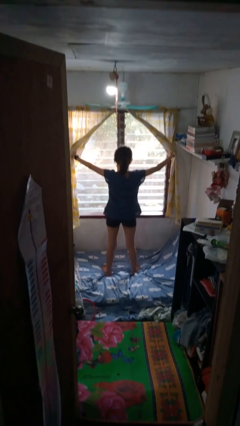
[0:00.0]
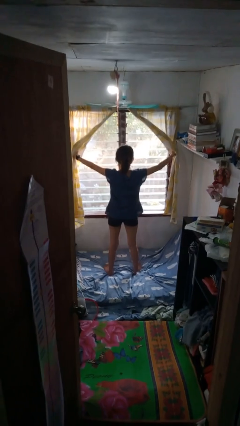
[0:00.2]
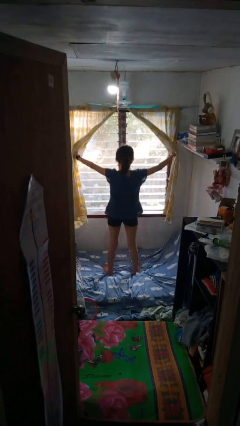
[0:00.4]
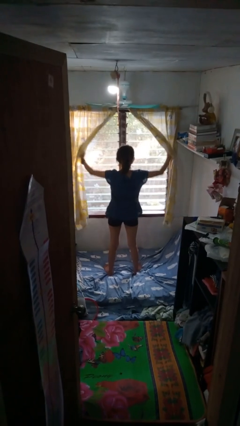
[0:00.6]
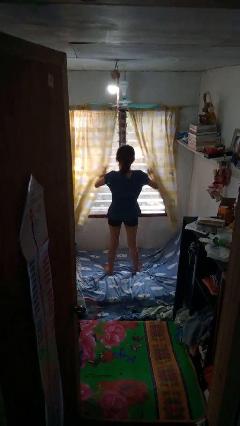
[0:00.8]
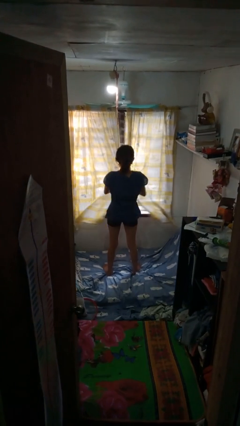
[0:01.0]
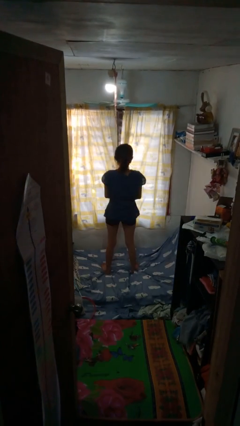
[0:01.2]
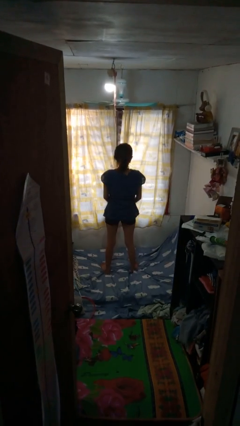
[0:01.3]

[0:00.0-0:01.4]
person closes curtains

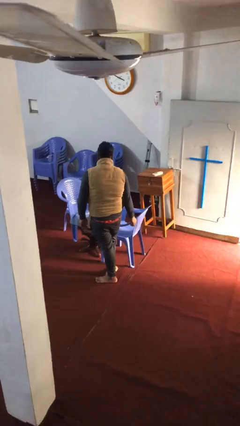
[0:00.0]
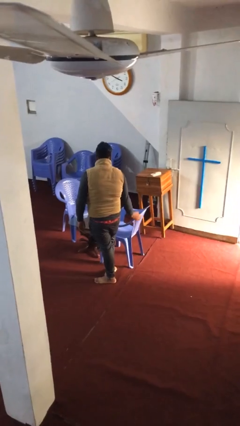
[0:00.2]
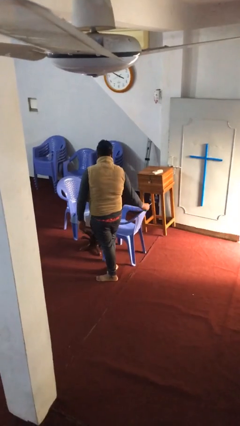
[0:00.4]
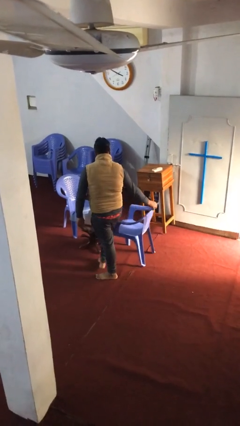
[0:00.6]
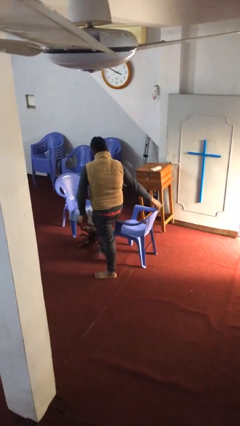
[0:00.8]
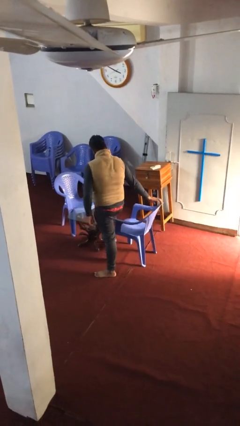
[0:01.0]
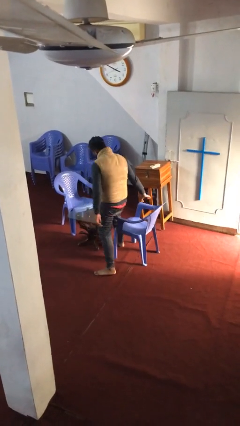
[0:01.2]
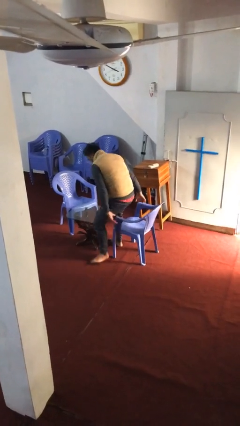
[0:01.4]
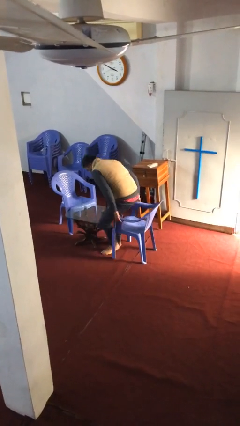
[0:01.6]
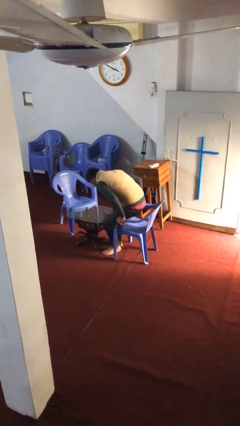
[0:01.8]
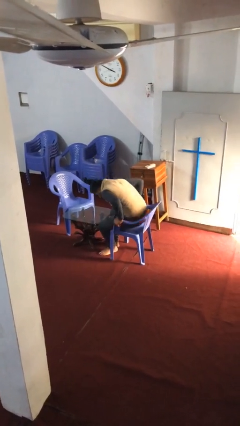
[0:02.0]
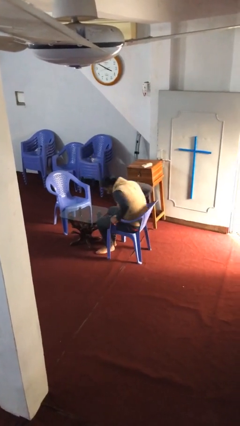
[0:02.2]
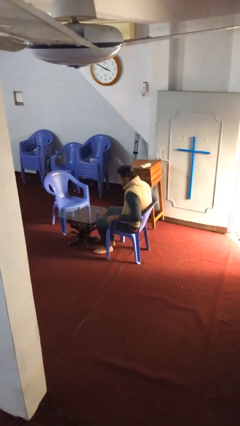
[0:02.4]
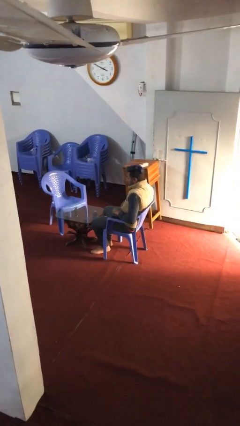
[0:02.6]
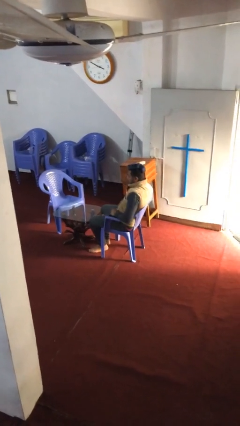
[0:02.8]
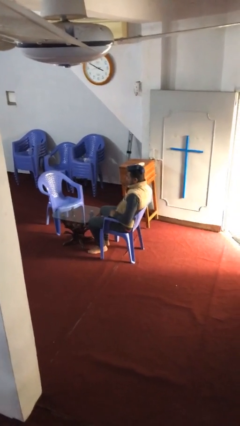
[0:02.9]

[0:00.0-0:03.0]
person sits down

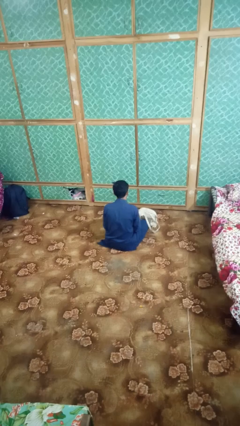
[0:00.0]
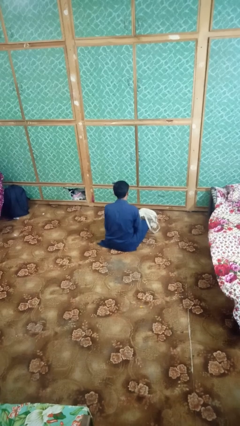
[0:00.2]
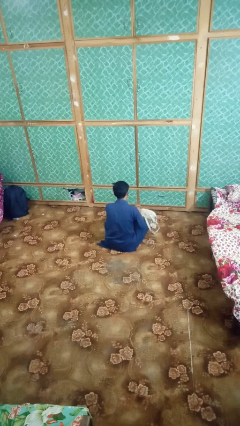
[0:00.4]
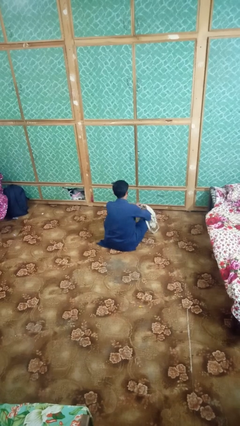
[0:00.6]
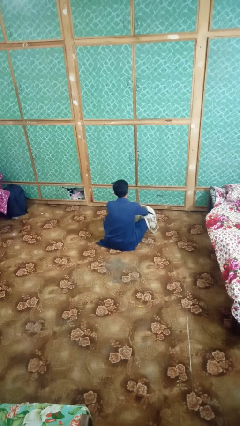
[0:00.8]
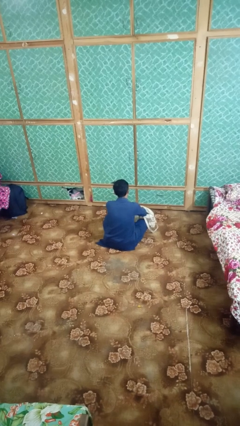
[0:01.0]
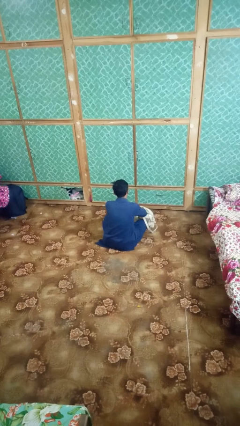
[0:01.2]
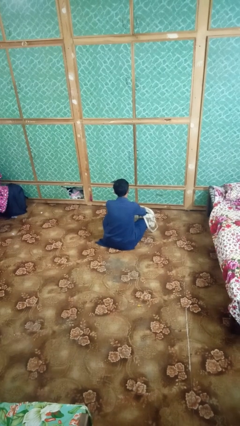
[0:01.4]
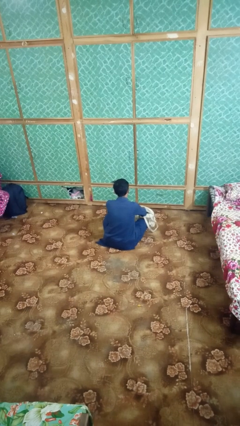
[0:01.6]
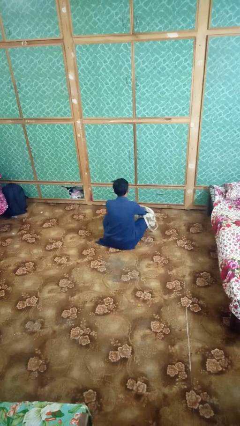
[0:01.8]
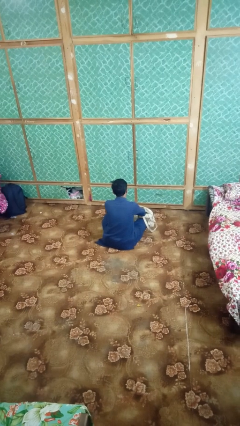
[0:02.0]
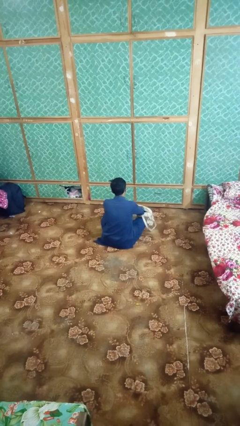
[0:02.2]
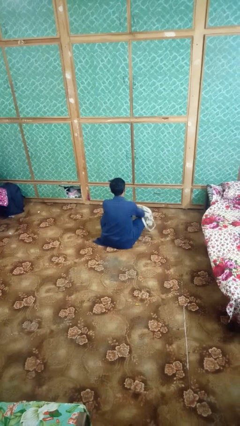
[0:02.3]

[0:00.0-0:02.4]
person searches in bag

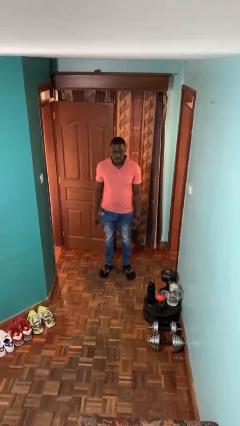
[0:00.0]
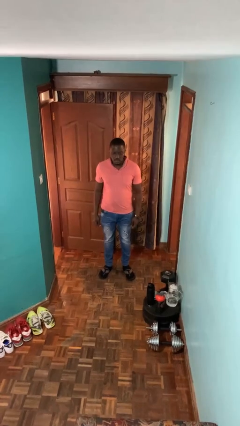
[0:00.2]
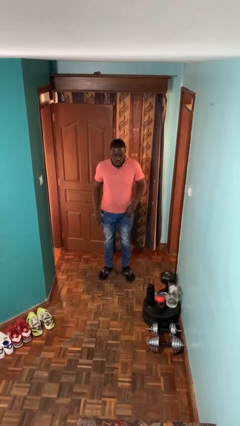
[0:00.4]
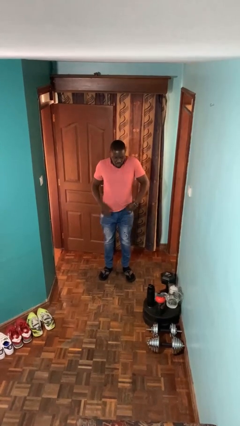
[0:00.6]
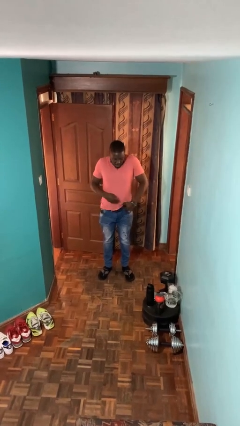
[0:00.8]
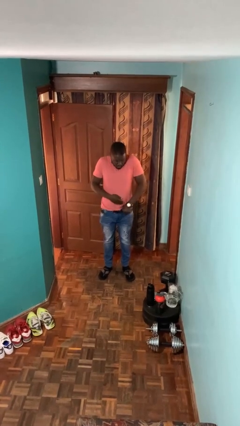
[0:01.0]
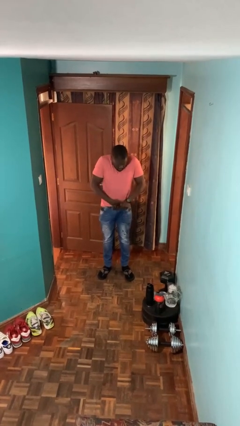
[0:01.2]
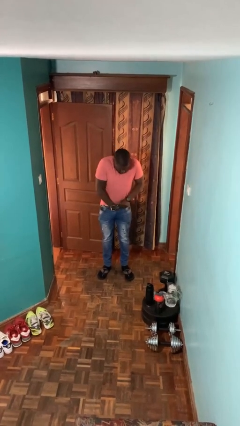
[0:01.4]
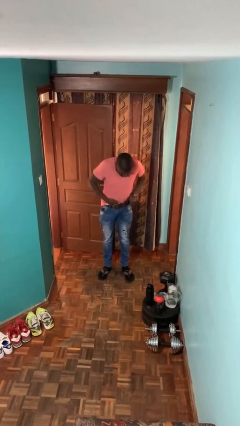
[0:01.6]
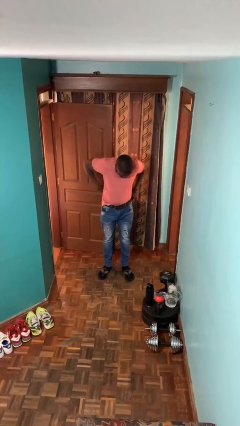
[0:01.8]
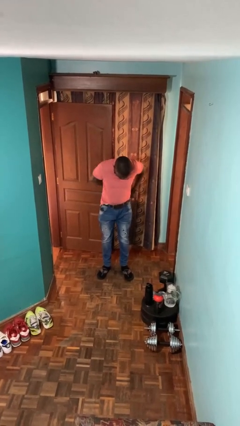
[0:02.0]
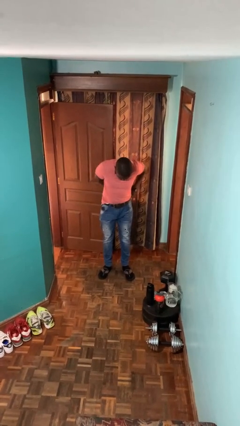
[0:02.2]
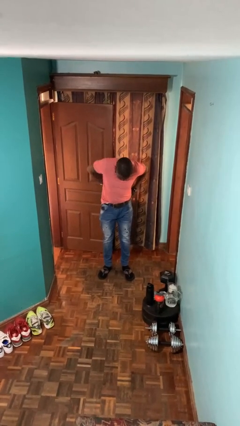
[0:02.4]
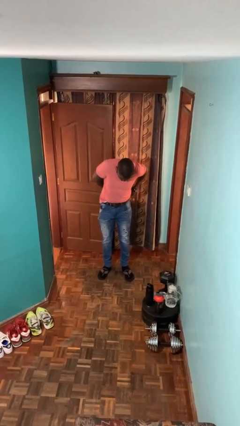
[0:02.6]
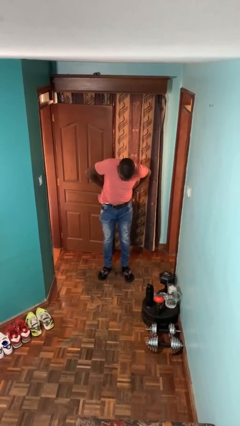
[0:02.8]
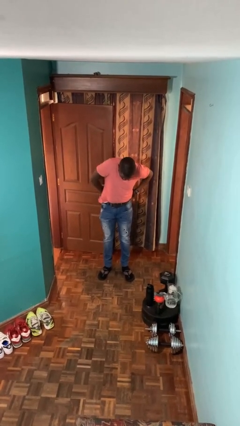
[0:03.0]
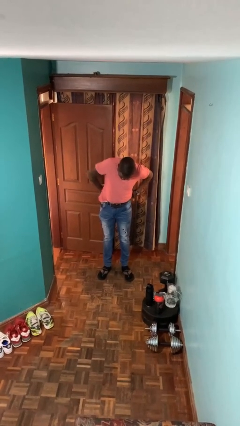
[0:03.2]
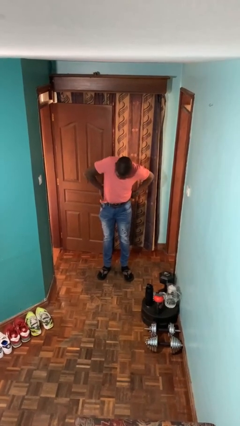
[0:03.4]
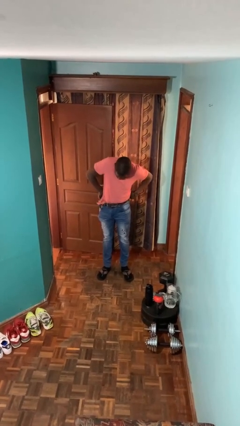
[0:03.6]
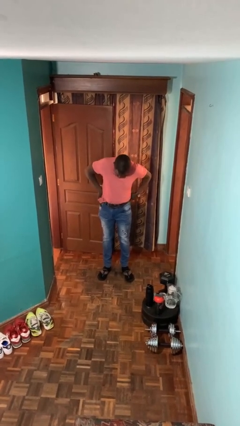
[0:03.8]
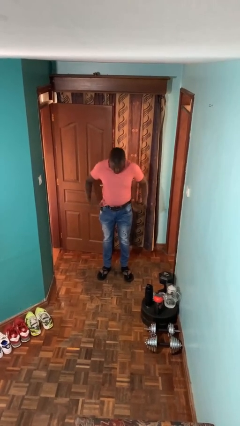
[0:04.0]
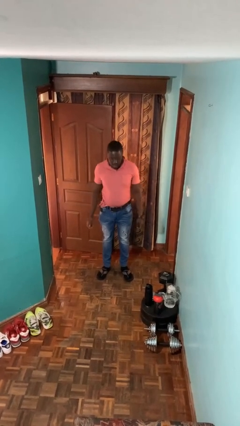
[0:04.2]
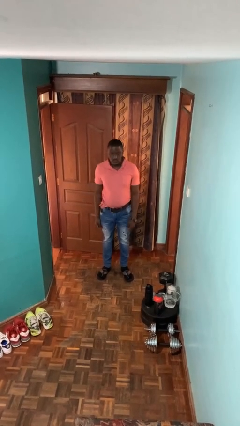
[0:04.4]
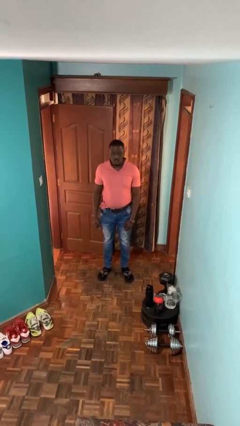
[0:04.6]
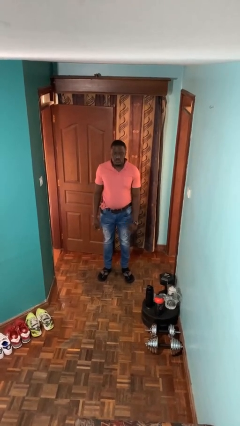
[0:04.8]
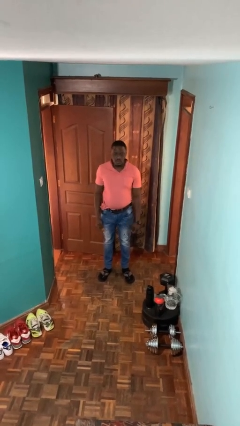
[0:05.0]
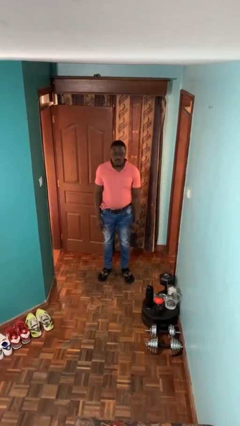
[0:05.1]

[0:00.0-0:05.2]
person tucks in shirt

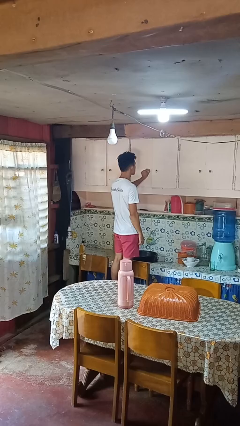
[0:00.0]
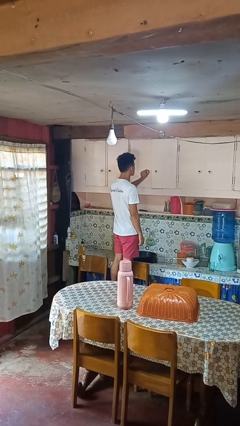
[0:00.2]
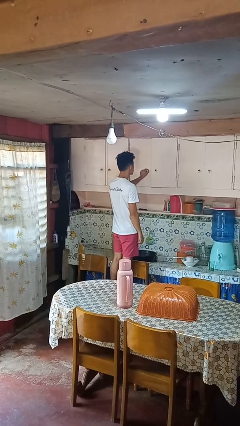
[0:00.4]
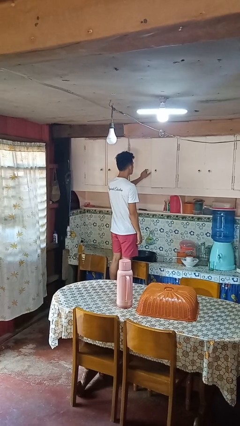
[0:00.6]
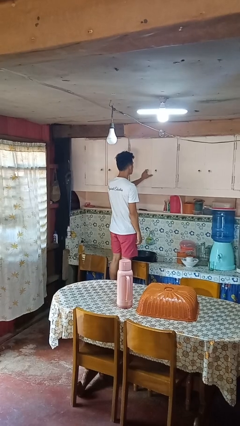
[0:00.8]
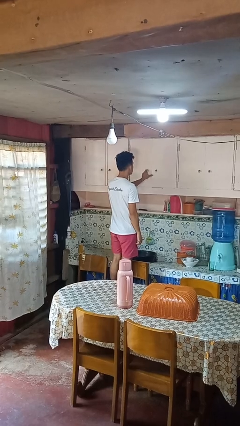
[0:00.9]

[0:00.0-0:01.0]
person closes cabinet

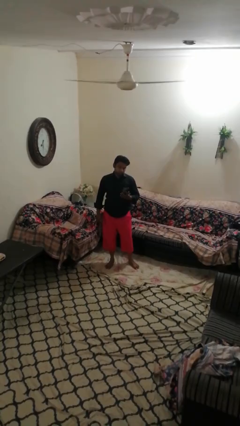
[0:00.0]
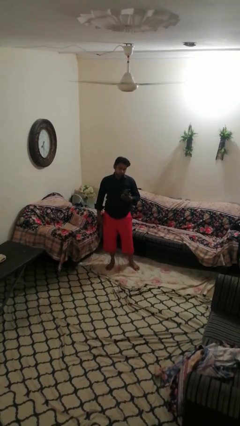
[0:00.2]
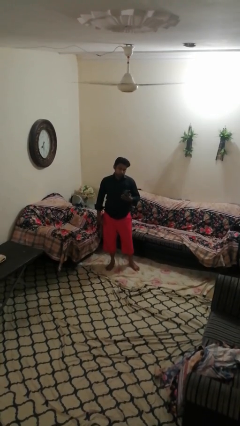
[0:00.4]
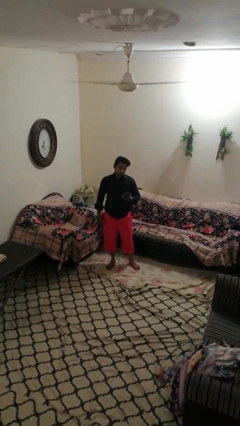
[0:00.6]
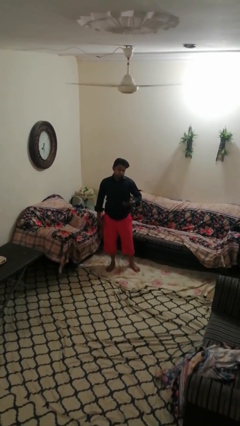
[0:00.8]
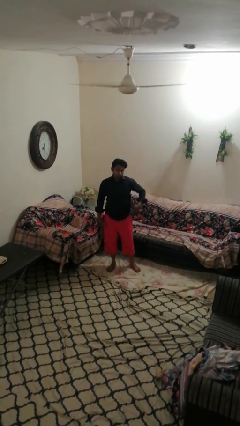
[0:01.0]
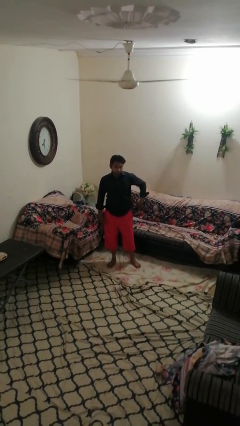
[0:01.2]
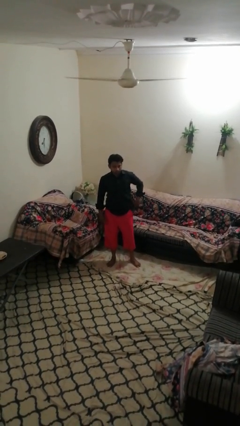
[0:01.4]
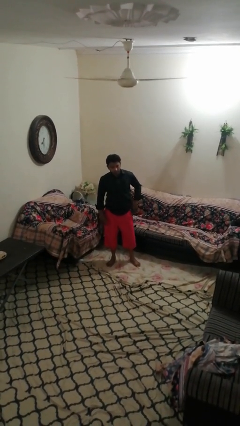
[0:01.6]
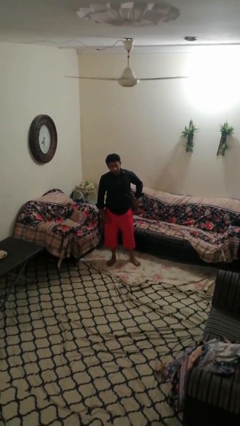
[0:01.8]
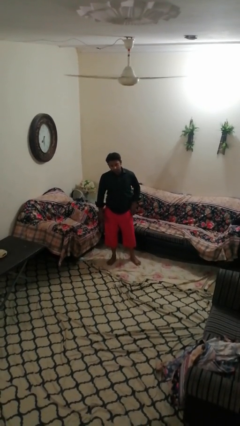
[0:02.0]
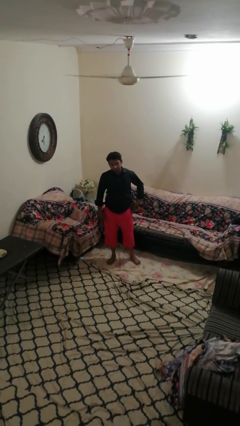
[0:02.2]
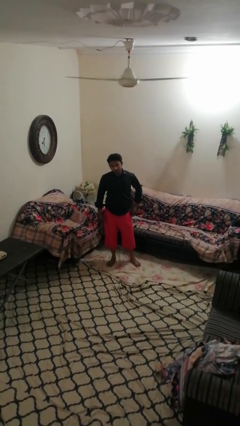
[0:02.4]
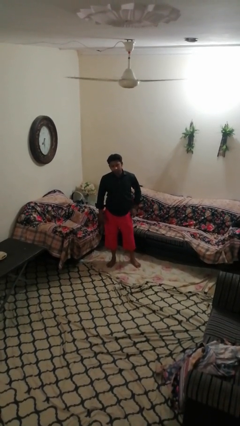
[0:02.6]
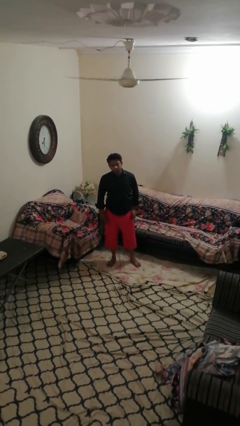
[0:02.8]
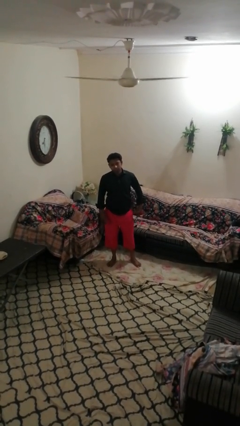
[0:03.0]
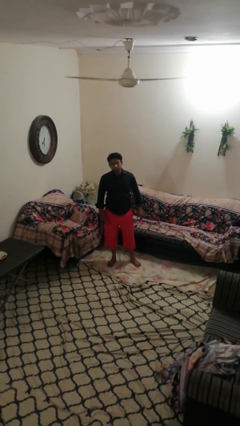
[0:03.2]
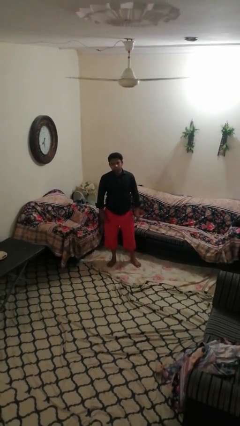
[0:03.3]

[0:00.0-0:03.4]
person puts phone into pocket

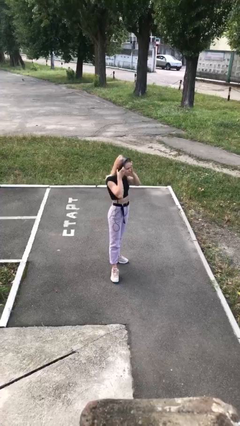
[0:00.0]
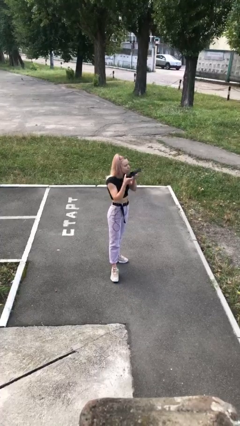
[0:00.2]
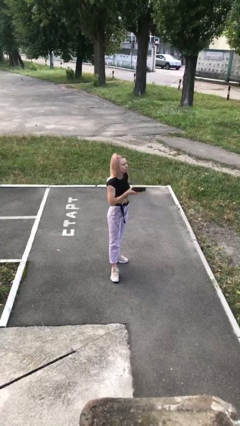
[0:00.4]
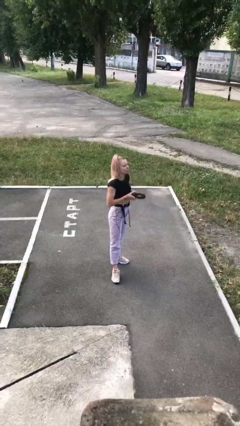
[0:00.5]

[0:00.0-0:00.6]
person takes off headphones

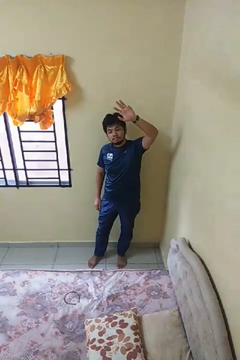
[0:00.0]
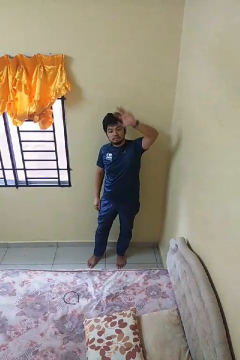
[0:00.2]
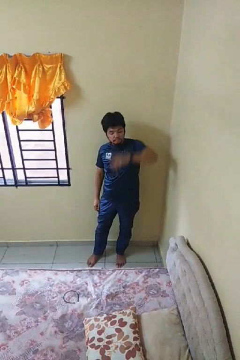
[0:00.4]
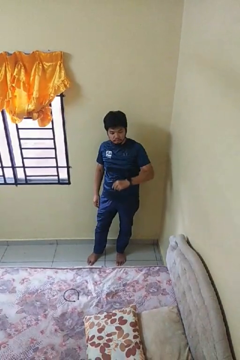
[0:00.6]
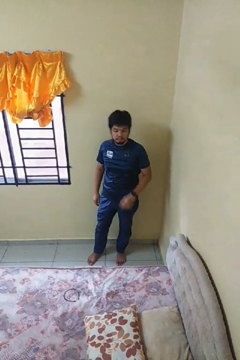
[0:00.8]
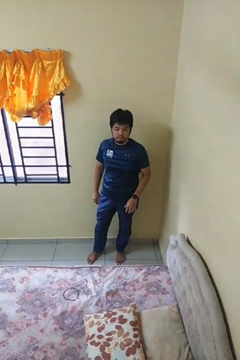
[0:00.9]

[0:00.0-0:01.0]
person gestures swipe down
